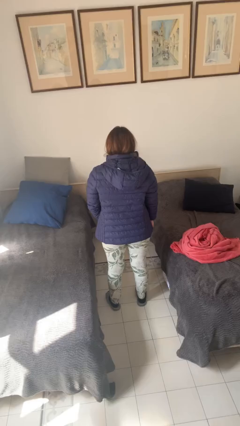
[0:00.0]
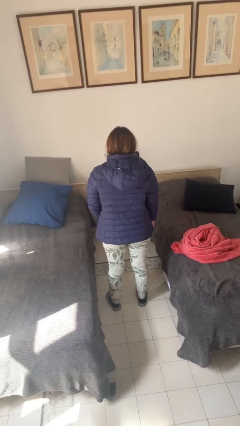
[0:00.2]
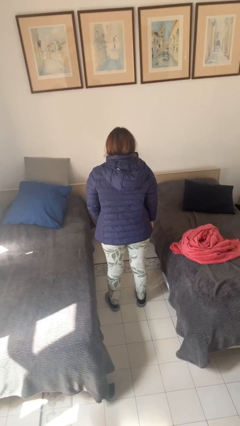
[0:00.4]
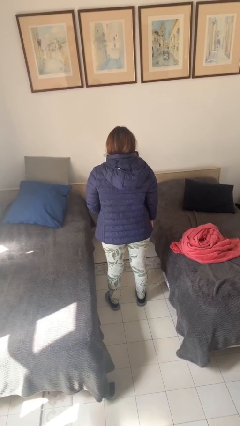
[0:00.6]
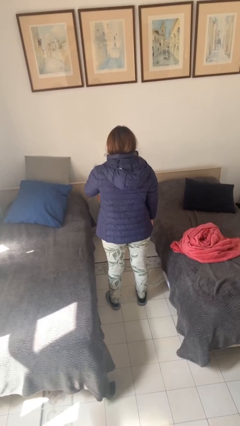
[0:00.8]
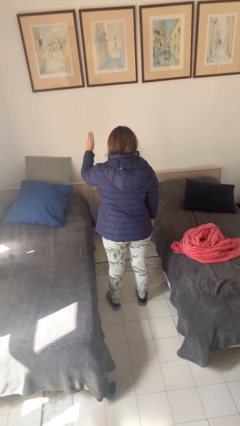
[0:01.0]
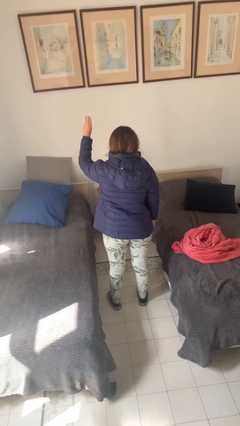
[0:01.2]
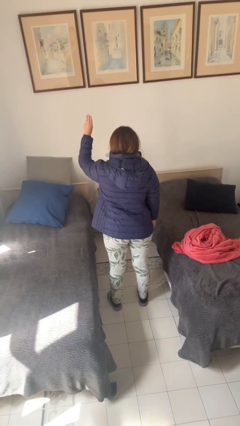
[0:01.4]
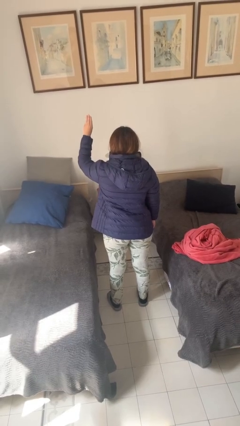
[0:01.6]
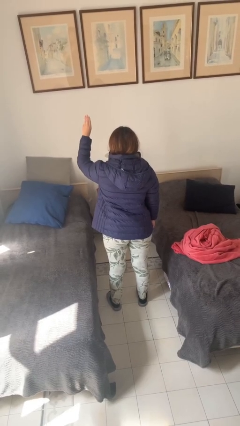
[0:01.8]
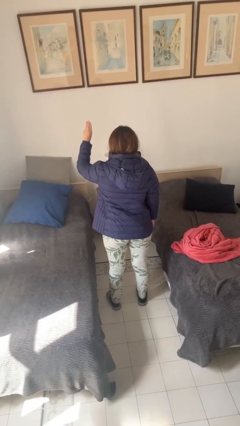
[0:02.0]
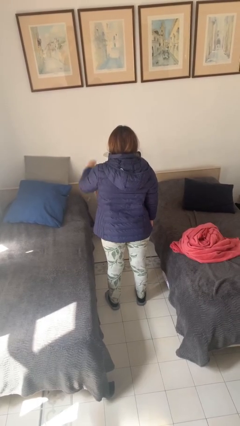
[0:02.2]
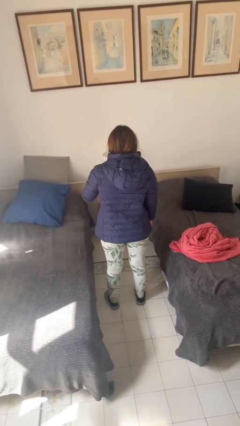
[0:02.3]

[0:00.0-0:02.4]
person gestures number three

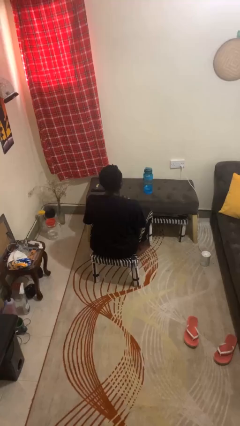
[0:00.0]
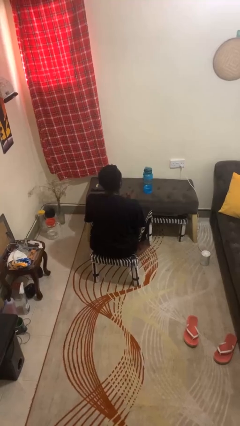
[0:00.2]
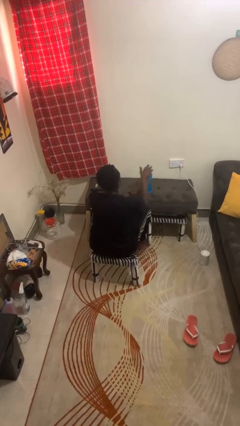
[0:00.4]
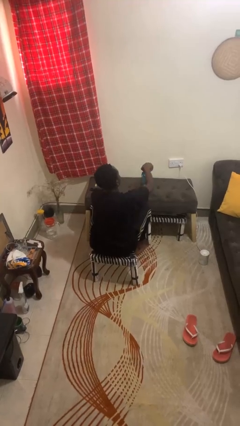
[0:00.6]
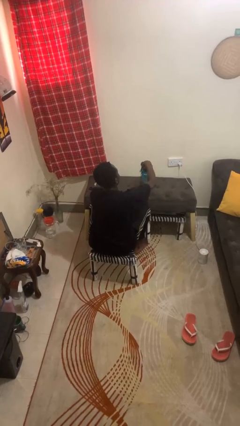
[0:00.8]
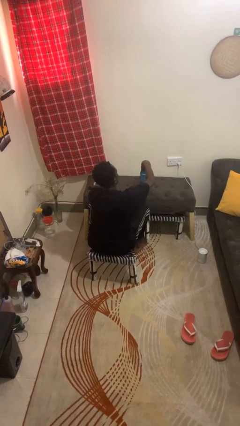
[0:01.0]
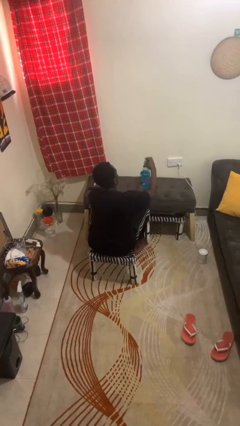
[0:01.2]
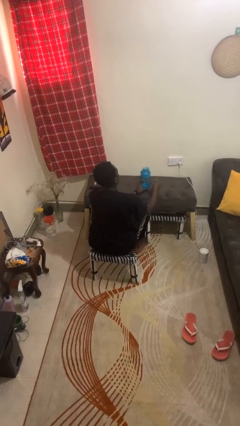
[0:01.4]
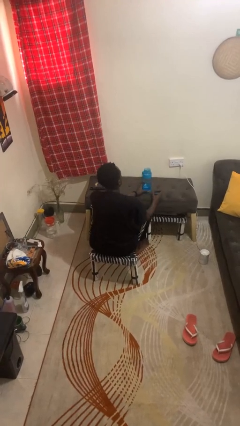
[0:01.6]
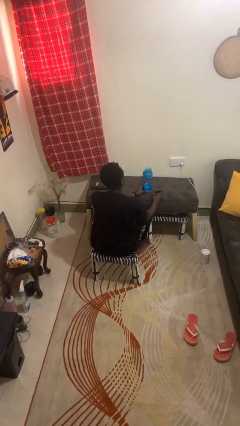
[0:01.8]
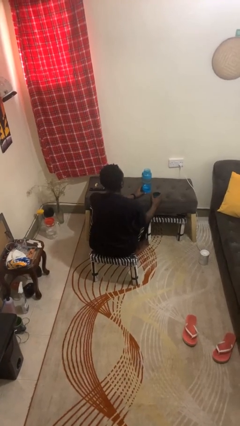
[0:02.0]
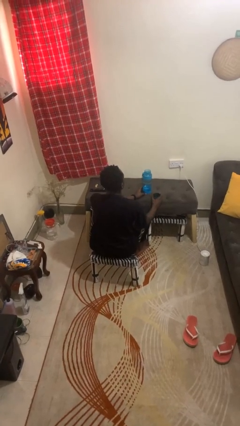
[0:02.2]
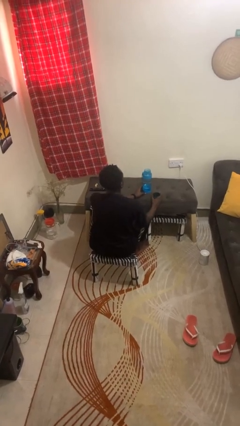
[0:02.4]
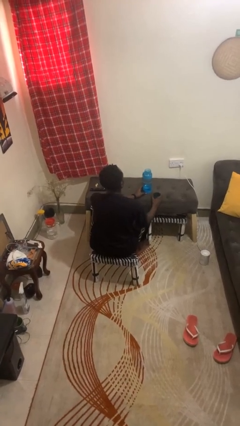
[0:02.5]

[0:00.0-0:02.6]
person opens jar

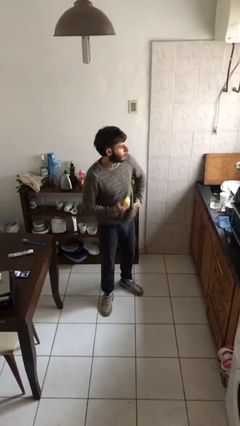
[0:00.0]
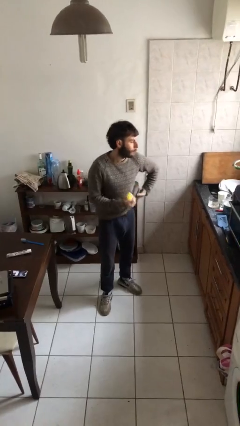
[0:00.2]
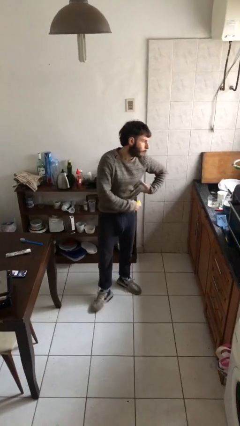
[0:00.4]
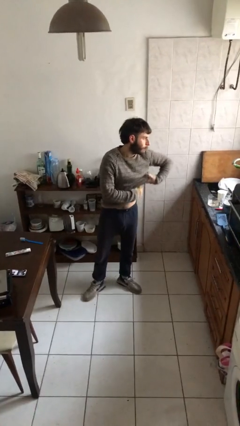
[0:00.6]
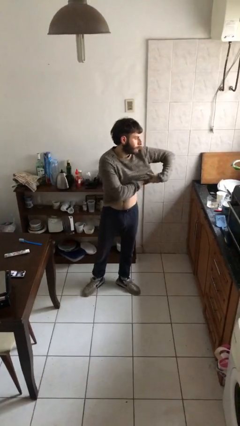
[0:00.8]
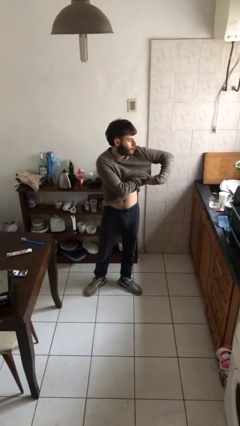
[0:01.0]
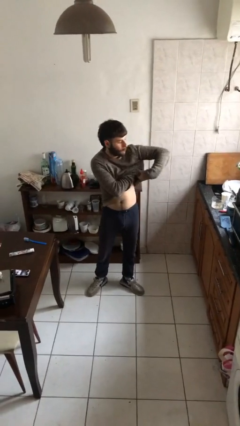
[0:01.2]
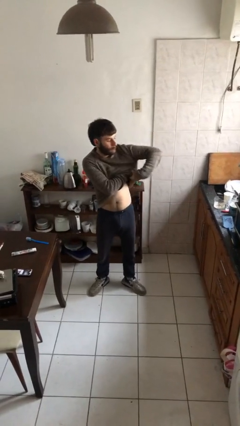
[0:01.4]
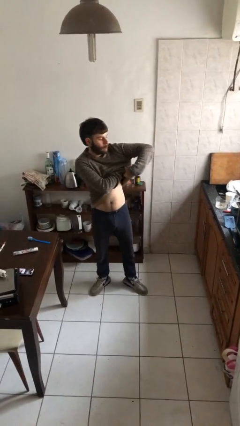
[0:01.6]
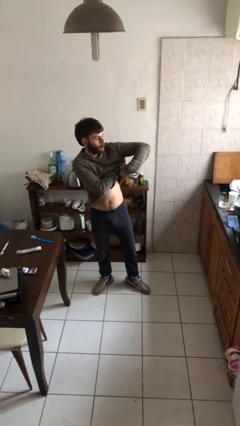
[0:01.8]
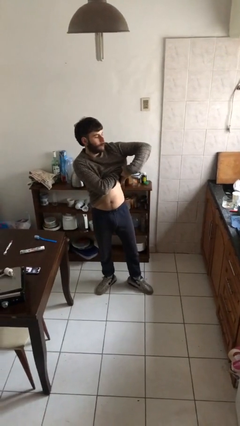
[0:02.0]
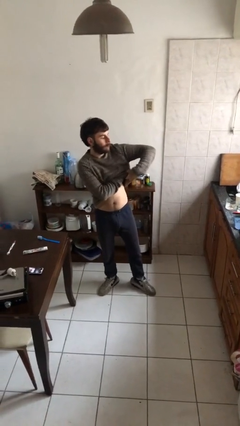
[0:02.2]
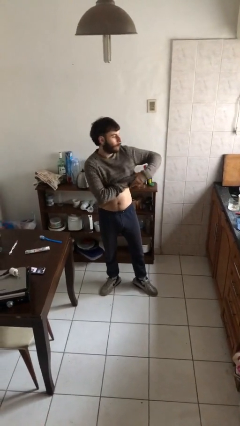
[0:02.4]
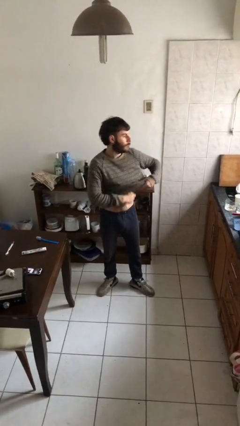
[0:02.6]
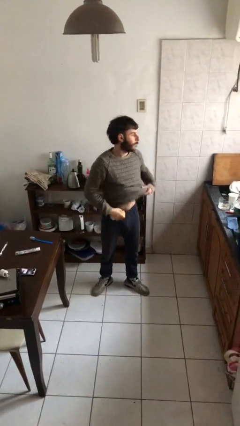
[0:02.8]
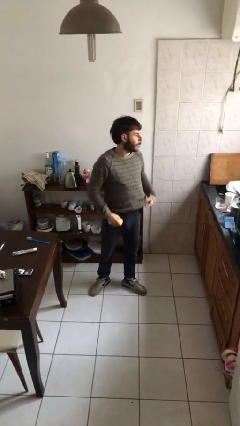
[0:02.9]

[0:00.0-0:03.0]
person applies deodorant

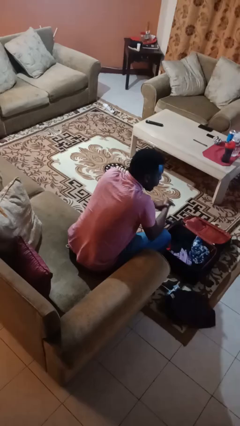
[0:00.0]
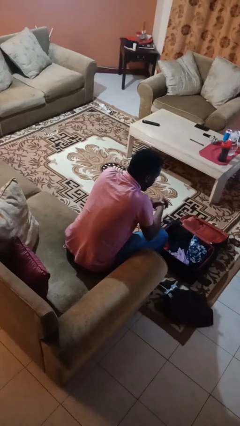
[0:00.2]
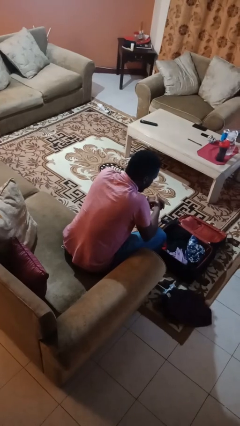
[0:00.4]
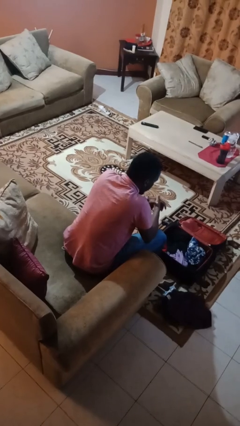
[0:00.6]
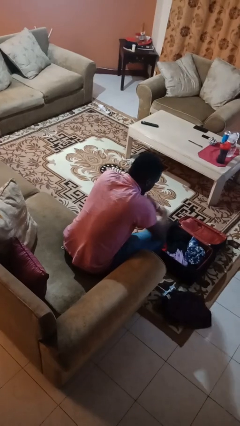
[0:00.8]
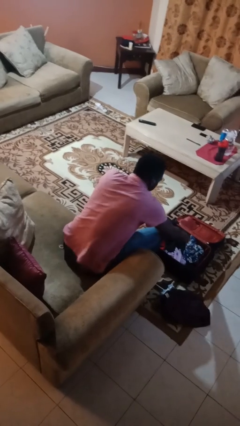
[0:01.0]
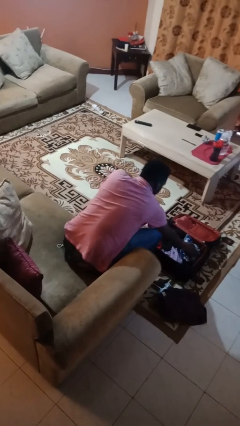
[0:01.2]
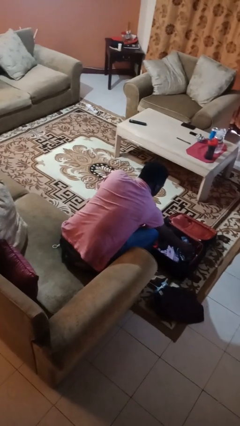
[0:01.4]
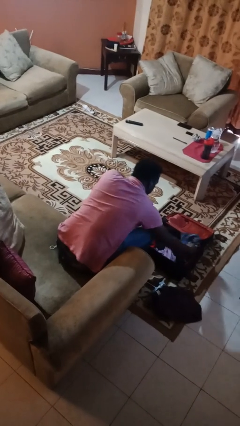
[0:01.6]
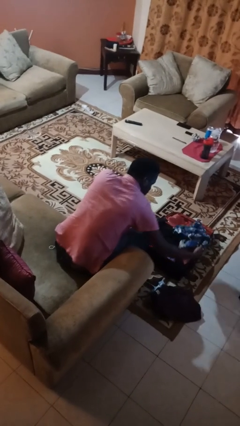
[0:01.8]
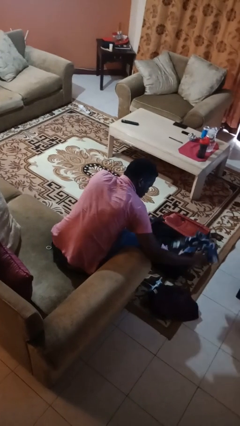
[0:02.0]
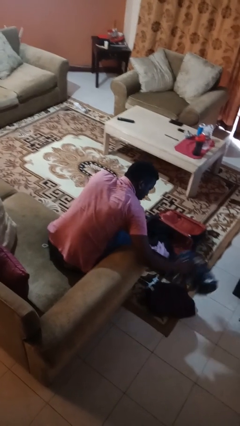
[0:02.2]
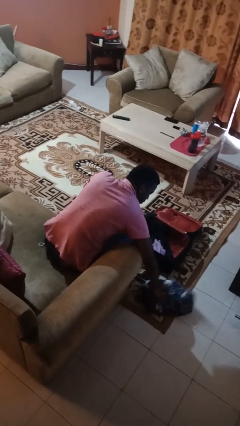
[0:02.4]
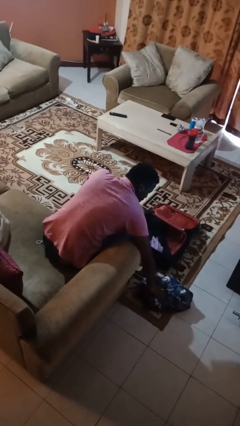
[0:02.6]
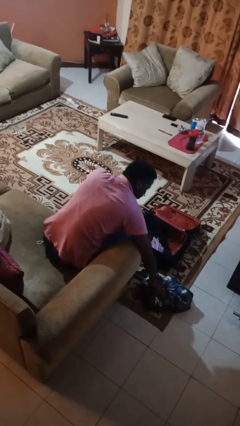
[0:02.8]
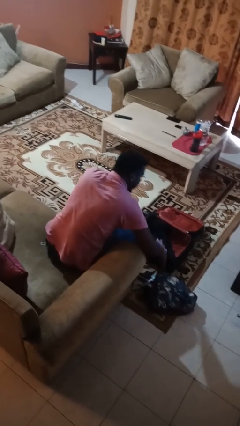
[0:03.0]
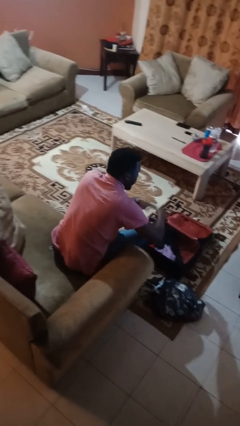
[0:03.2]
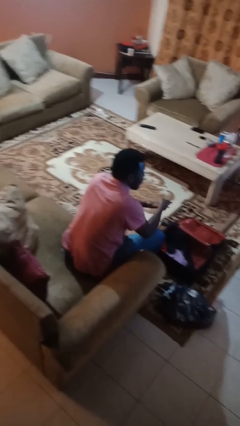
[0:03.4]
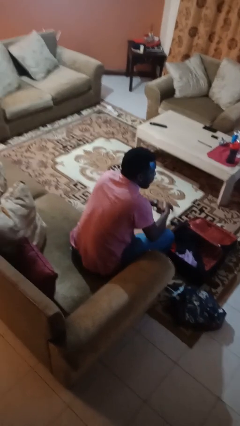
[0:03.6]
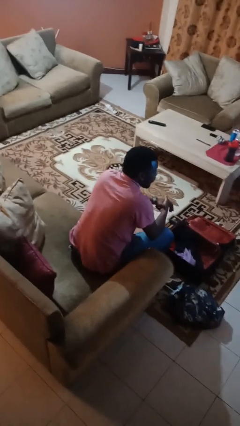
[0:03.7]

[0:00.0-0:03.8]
person unloads clothes from suitcase

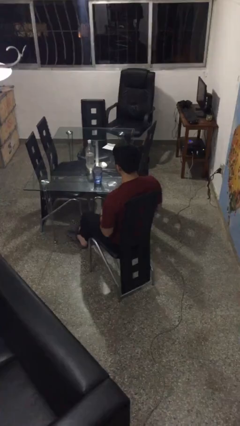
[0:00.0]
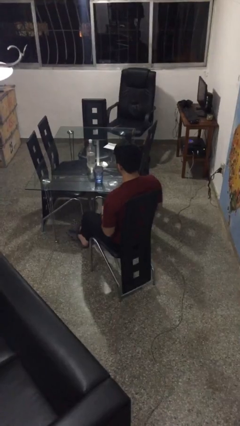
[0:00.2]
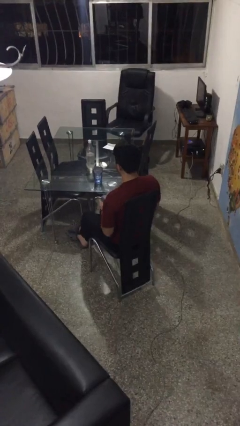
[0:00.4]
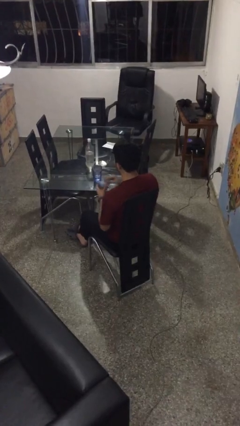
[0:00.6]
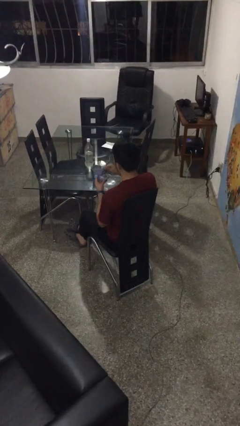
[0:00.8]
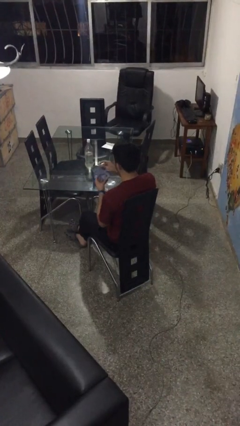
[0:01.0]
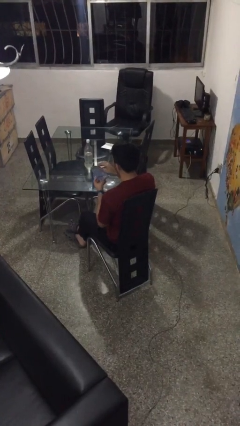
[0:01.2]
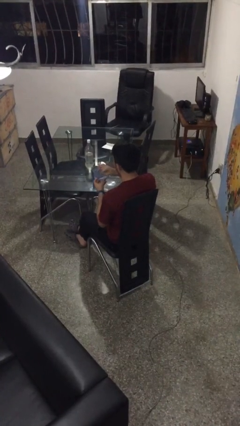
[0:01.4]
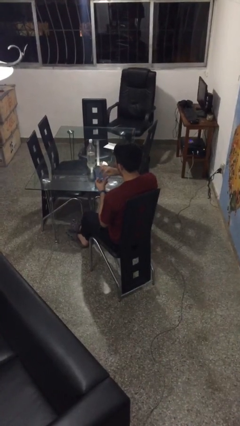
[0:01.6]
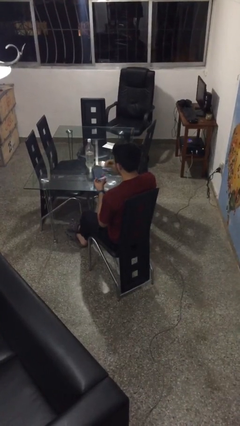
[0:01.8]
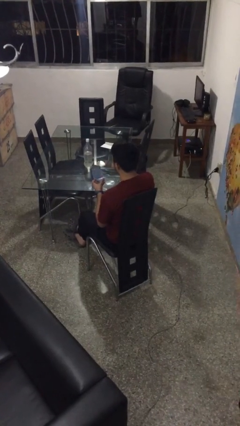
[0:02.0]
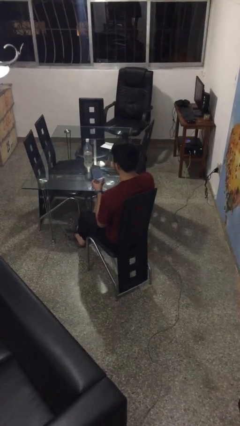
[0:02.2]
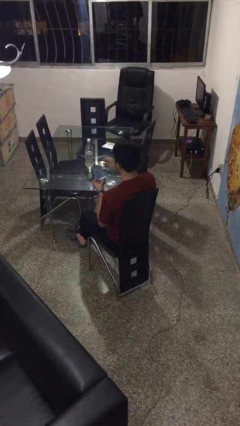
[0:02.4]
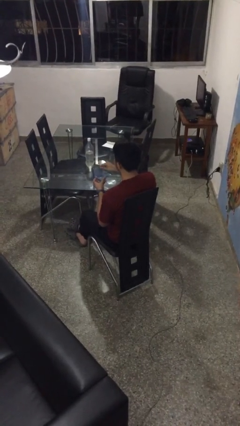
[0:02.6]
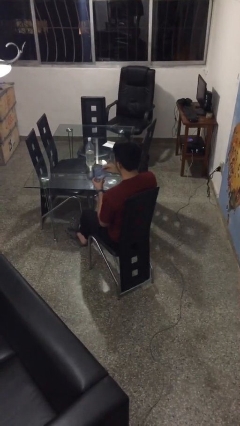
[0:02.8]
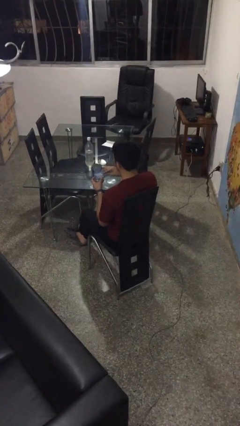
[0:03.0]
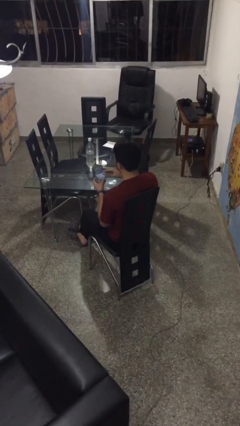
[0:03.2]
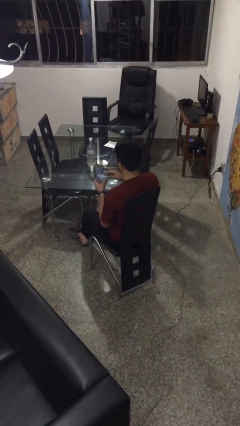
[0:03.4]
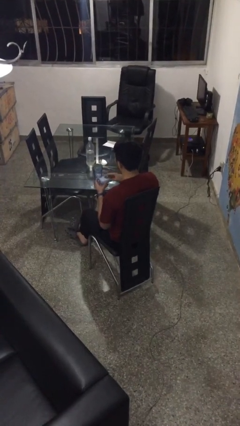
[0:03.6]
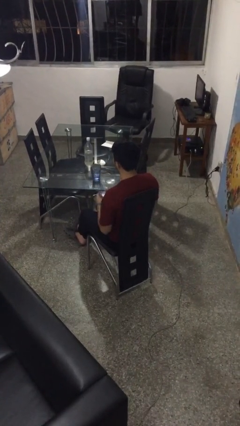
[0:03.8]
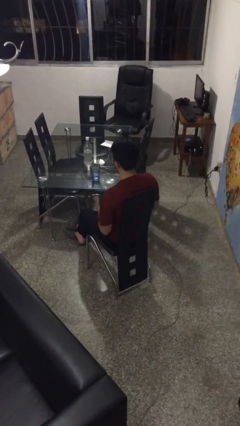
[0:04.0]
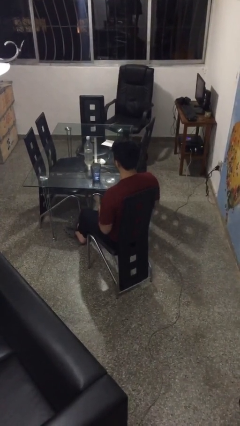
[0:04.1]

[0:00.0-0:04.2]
person takes medicine pills

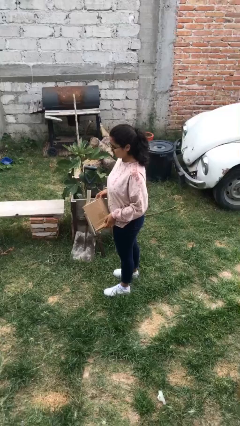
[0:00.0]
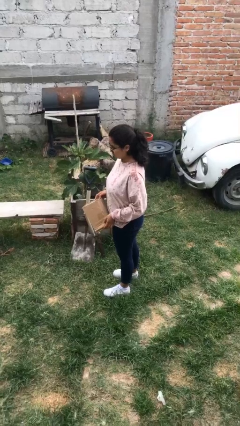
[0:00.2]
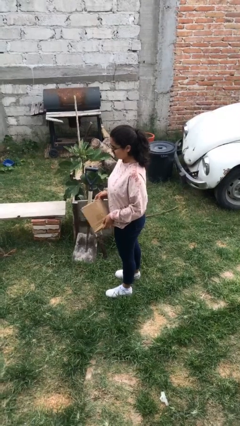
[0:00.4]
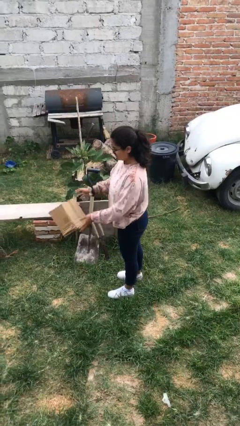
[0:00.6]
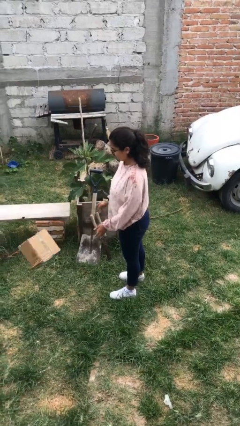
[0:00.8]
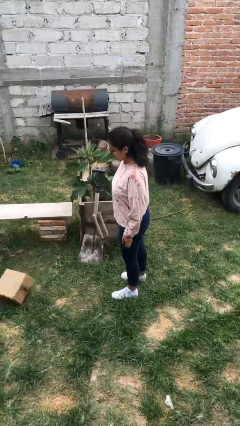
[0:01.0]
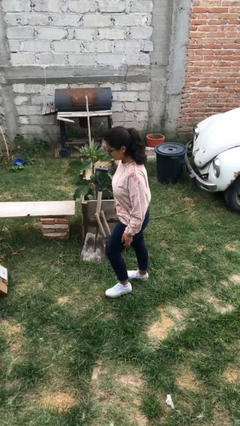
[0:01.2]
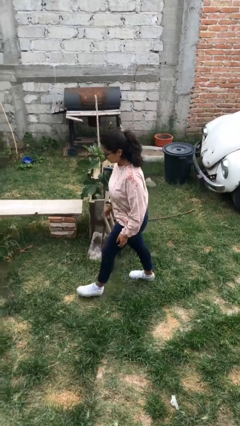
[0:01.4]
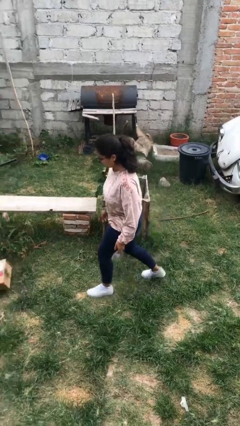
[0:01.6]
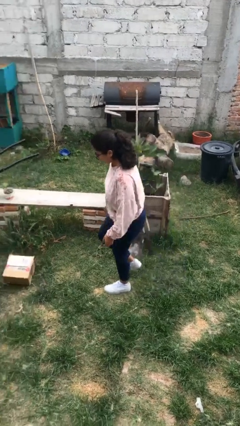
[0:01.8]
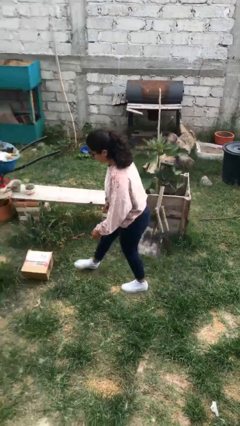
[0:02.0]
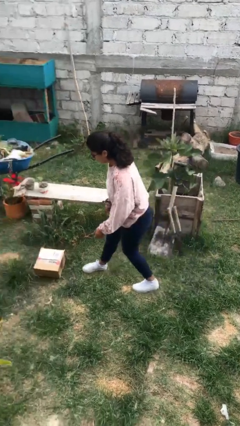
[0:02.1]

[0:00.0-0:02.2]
person throws object to ground
